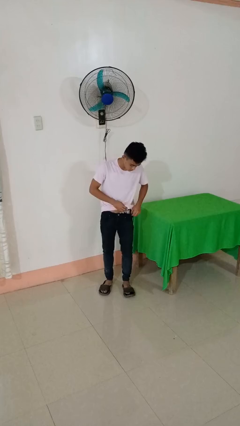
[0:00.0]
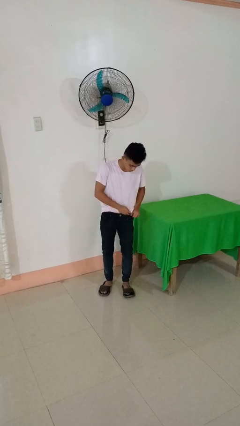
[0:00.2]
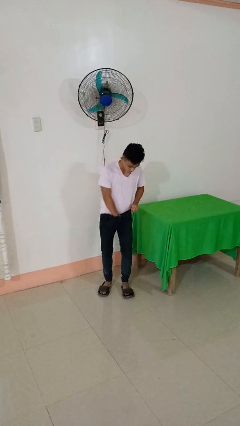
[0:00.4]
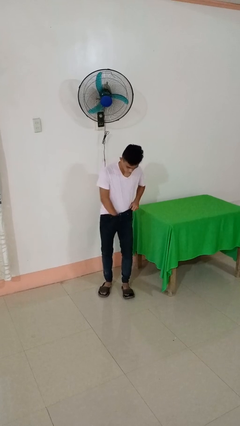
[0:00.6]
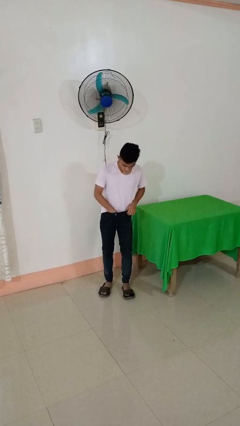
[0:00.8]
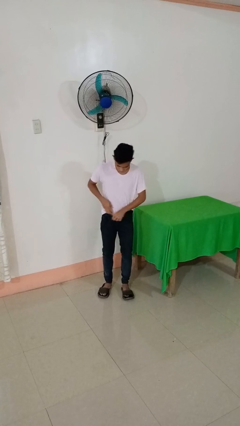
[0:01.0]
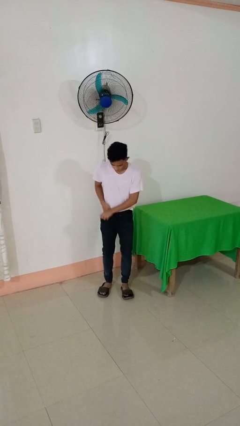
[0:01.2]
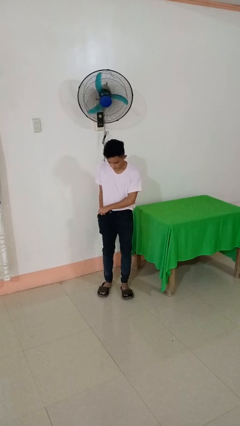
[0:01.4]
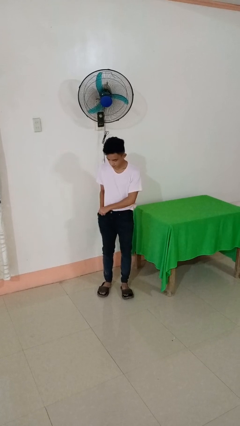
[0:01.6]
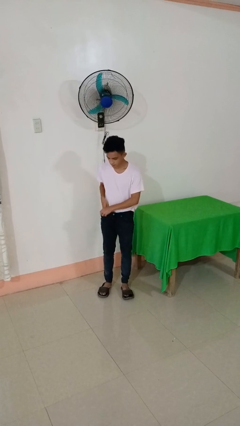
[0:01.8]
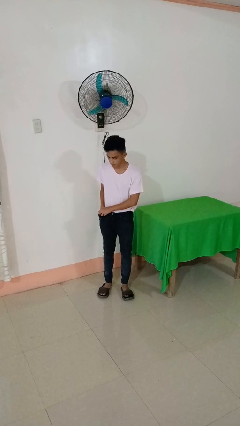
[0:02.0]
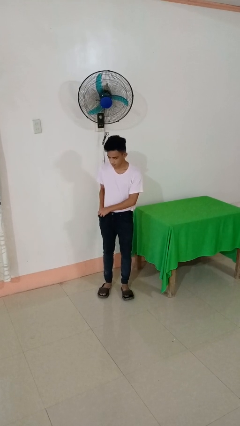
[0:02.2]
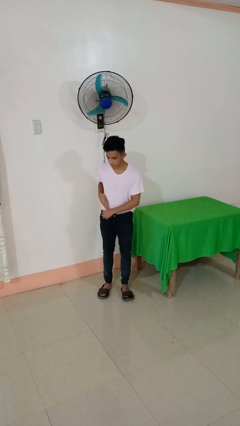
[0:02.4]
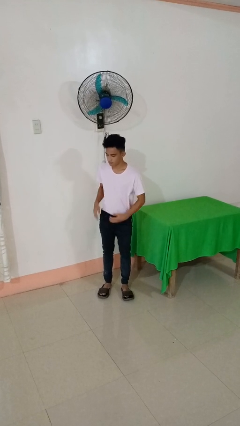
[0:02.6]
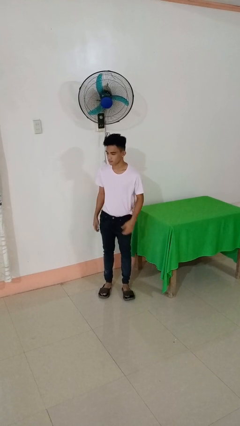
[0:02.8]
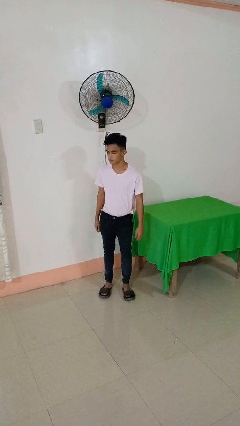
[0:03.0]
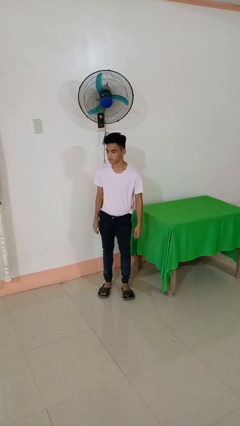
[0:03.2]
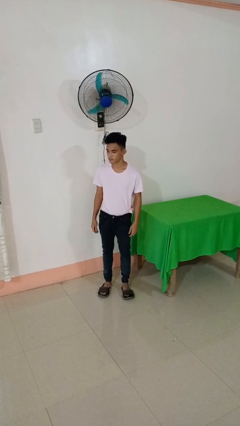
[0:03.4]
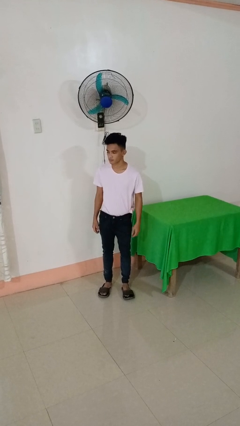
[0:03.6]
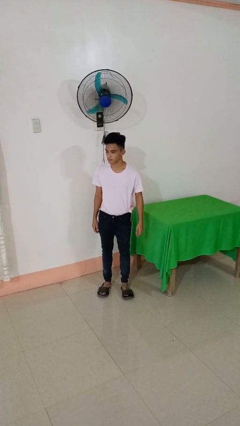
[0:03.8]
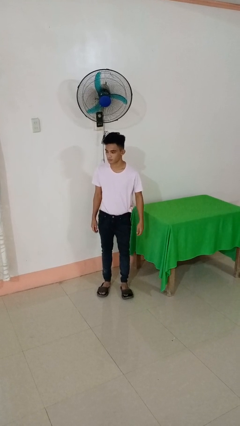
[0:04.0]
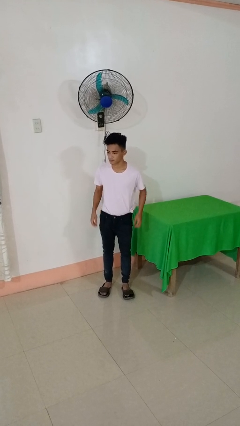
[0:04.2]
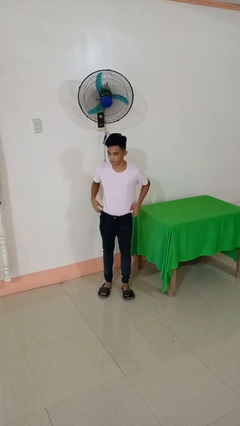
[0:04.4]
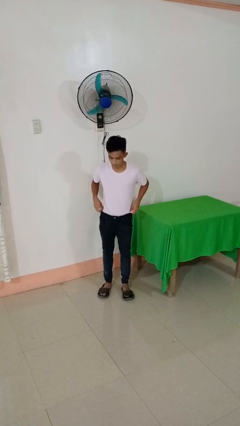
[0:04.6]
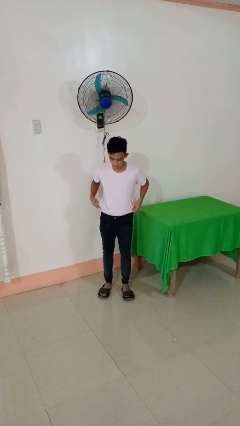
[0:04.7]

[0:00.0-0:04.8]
person tucks in shirt

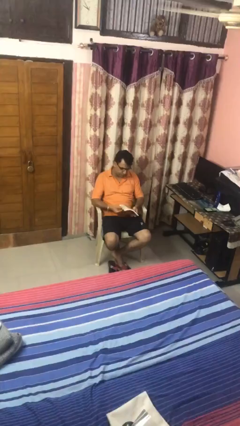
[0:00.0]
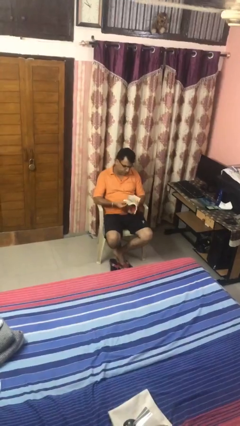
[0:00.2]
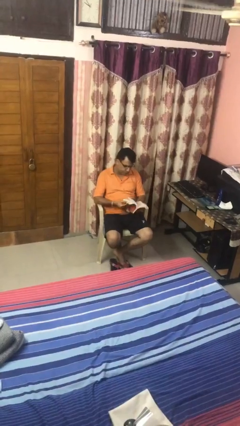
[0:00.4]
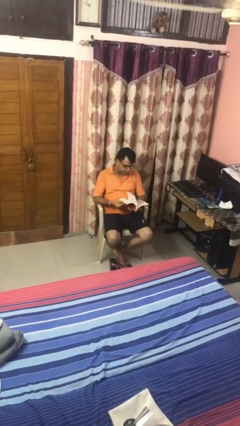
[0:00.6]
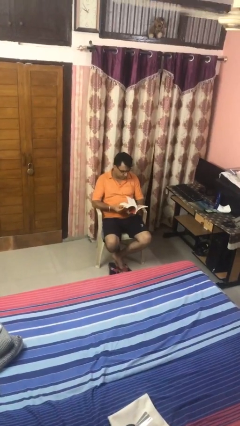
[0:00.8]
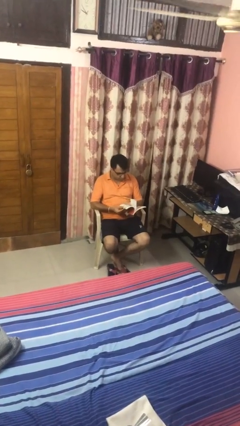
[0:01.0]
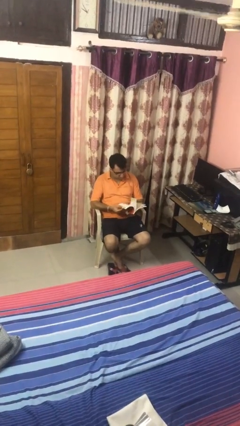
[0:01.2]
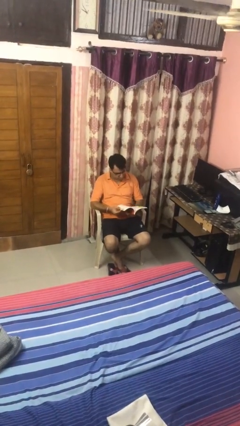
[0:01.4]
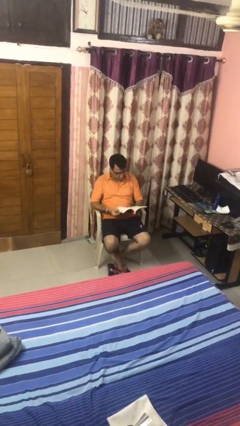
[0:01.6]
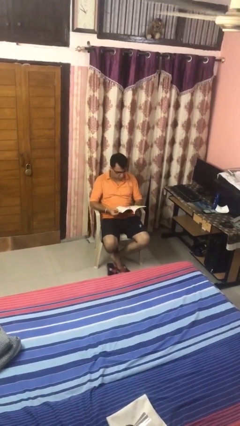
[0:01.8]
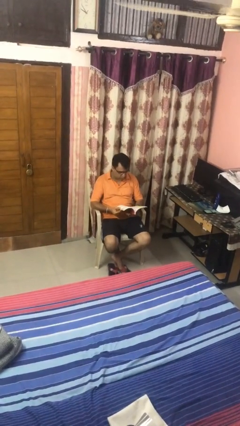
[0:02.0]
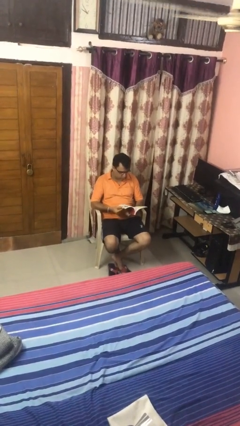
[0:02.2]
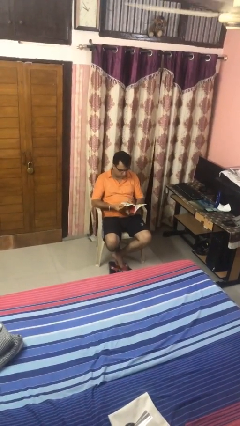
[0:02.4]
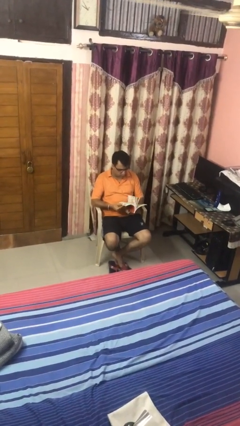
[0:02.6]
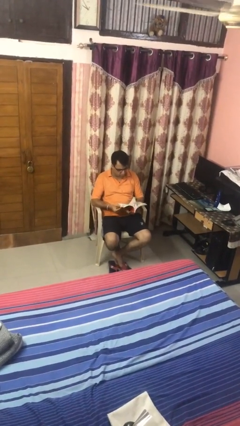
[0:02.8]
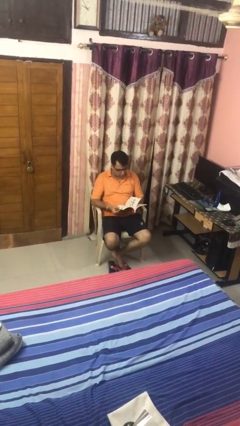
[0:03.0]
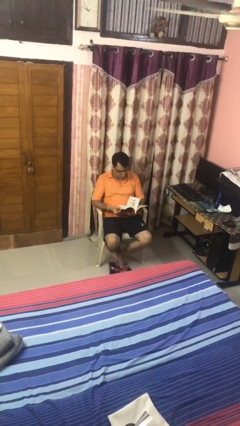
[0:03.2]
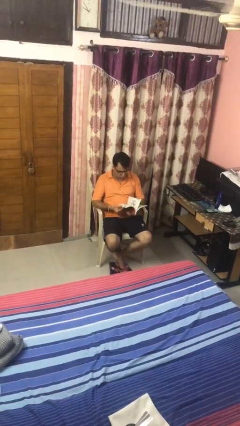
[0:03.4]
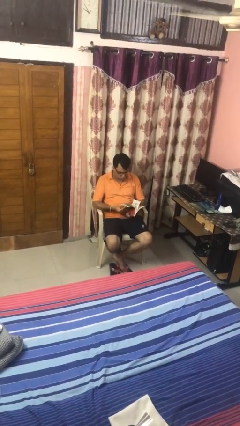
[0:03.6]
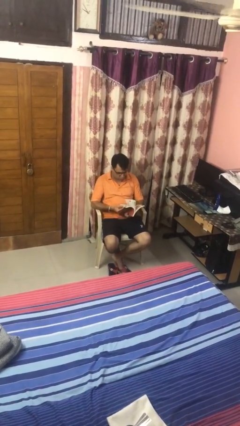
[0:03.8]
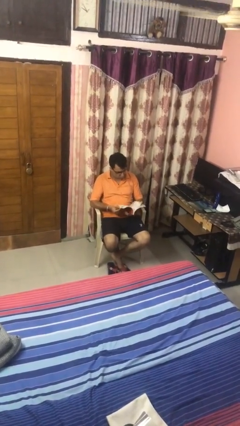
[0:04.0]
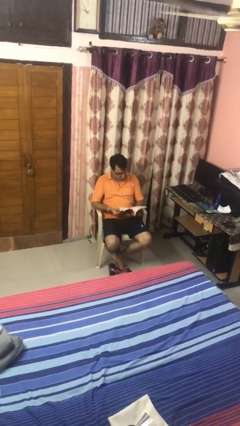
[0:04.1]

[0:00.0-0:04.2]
person reads magazine

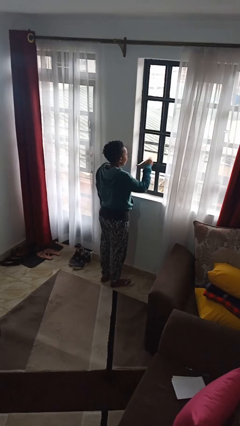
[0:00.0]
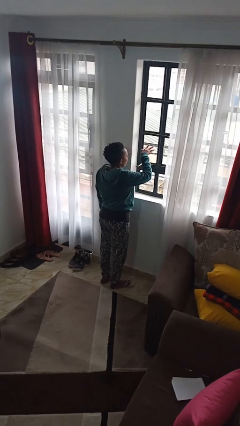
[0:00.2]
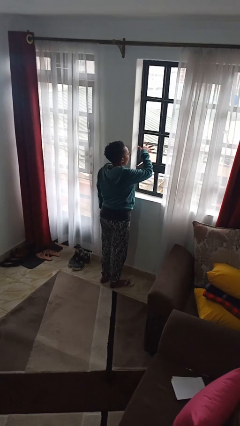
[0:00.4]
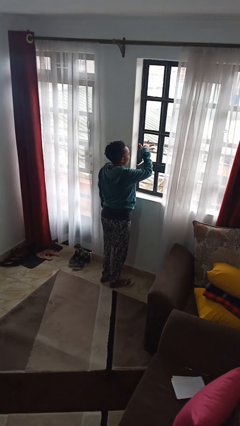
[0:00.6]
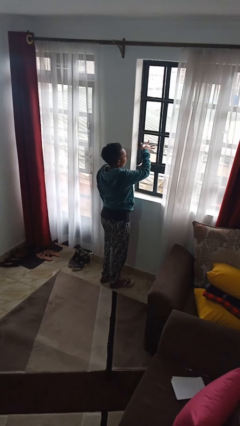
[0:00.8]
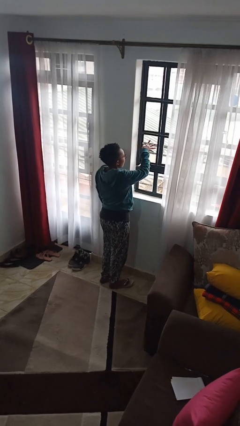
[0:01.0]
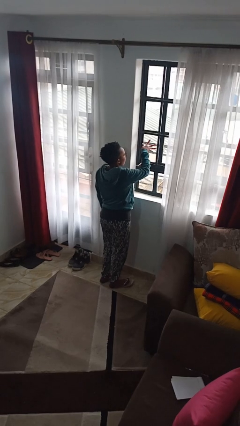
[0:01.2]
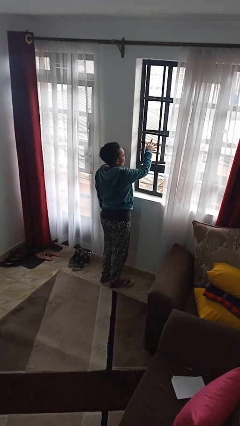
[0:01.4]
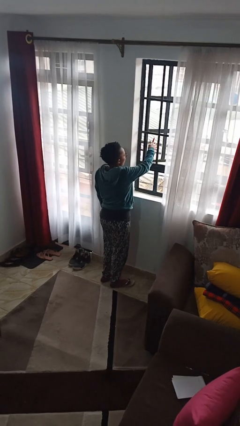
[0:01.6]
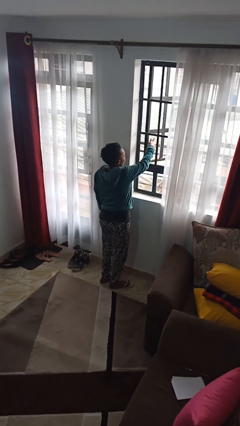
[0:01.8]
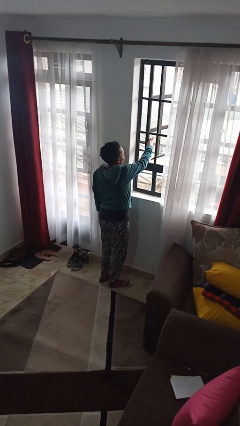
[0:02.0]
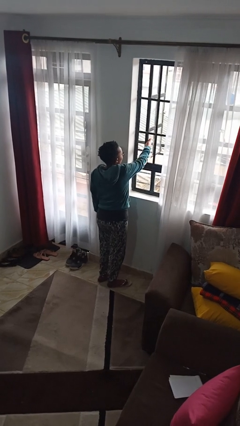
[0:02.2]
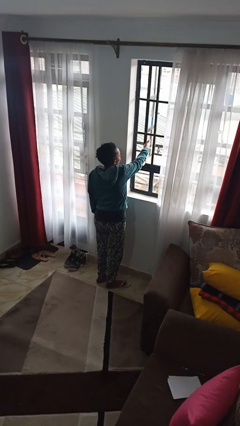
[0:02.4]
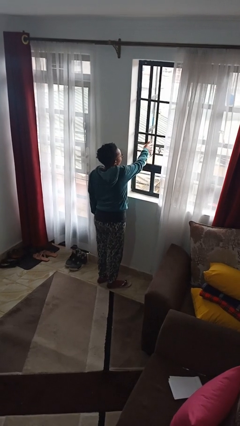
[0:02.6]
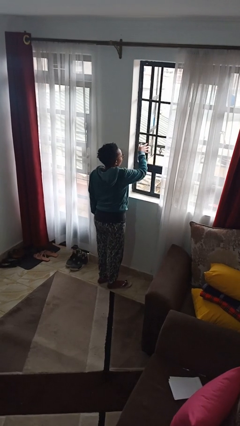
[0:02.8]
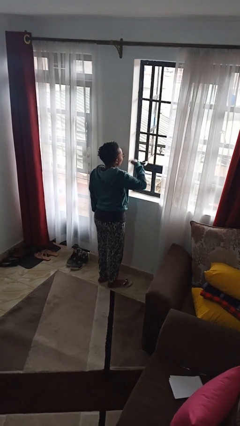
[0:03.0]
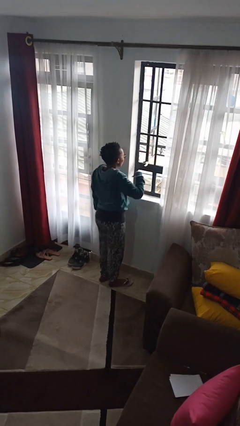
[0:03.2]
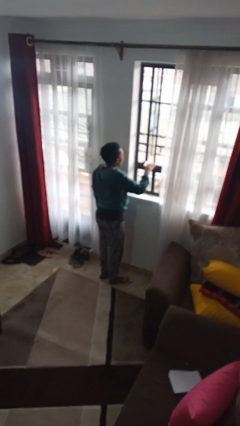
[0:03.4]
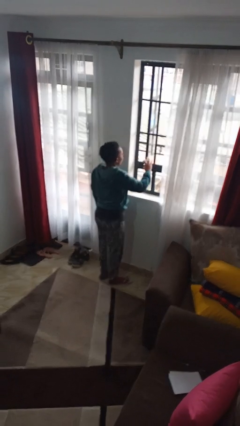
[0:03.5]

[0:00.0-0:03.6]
person opens home window

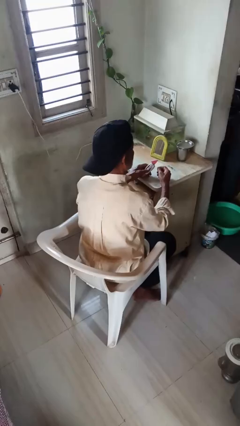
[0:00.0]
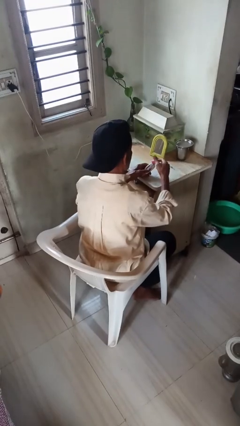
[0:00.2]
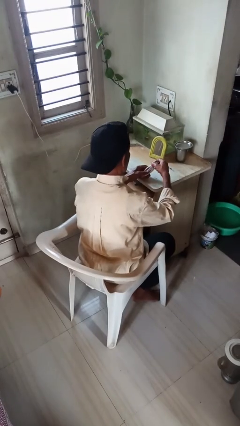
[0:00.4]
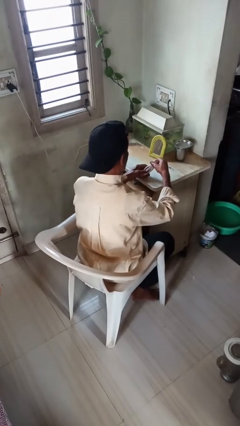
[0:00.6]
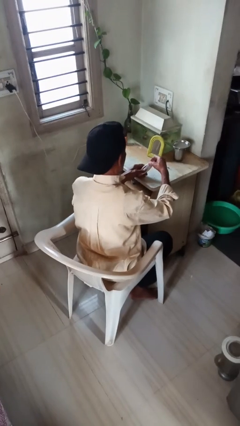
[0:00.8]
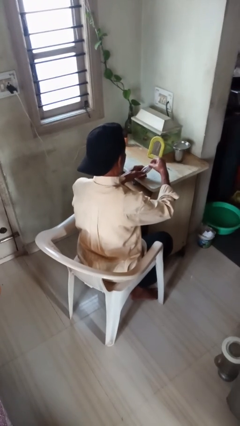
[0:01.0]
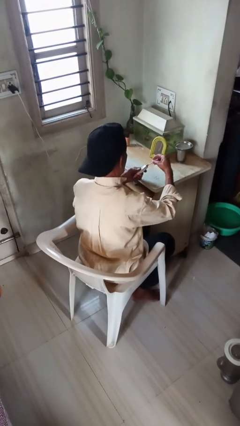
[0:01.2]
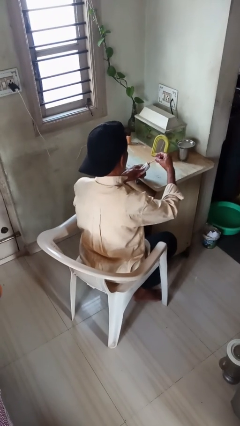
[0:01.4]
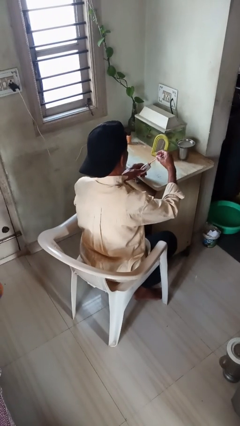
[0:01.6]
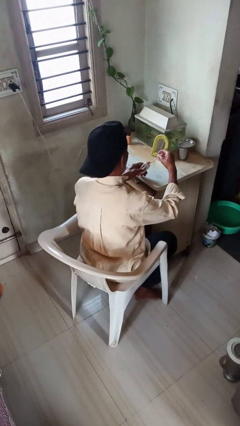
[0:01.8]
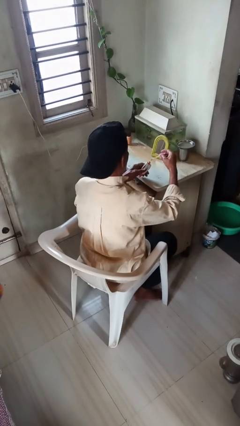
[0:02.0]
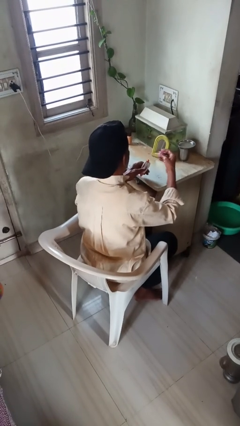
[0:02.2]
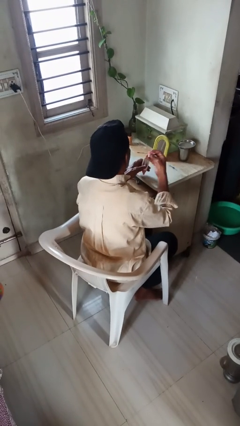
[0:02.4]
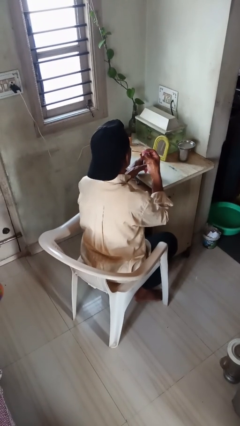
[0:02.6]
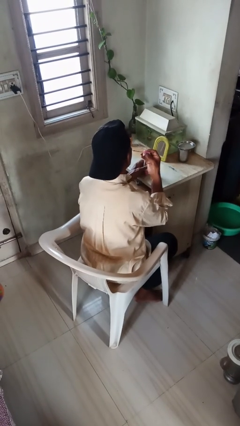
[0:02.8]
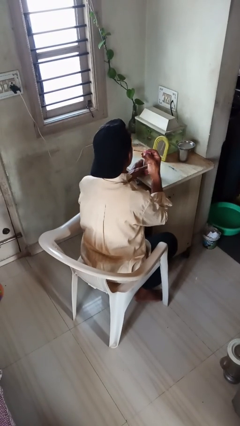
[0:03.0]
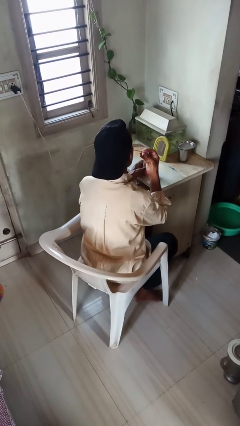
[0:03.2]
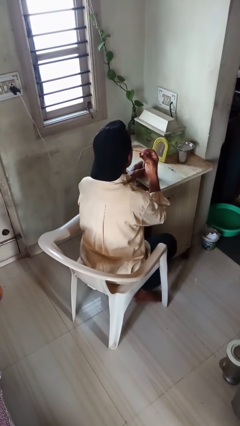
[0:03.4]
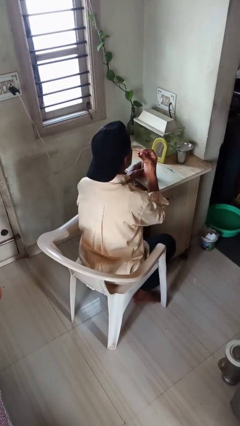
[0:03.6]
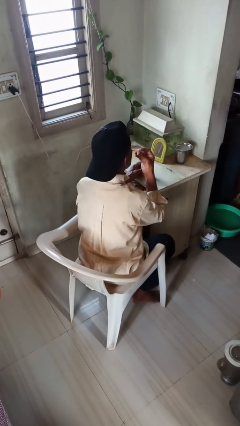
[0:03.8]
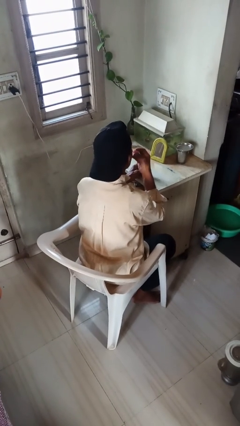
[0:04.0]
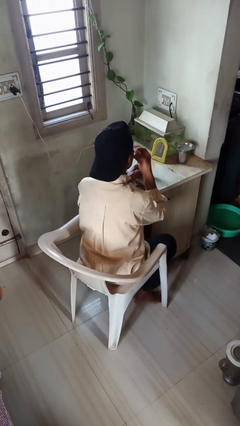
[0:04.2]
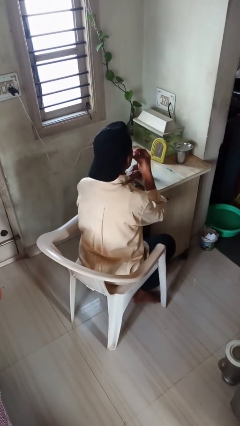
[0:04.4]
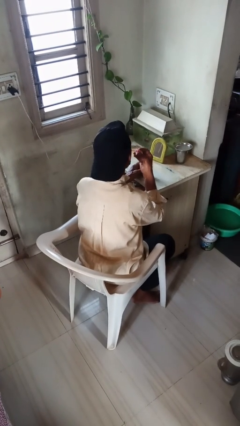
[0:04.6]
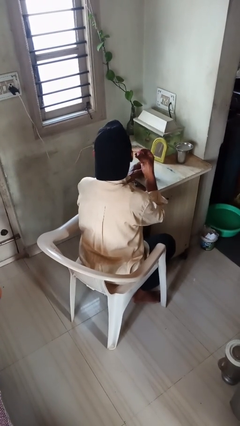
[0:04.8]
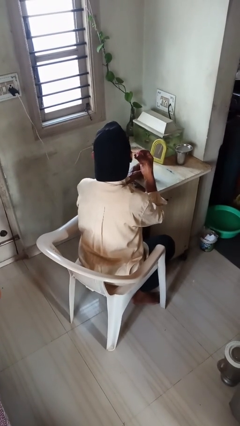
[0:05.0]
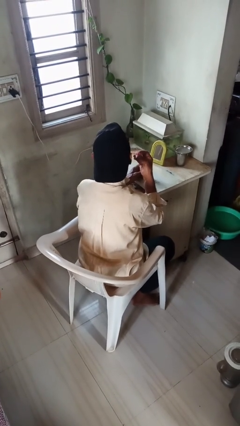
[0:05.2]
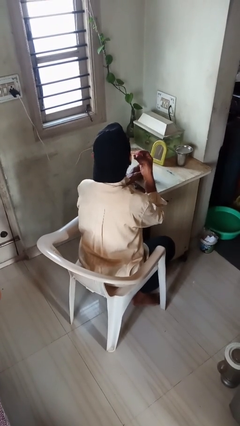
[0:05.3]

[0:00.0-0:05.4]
person applies lip makeup
